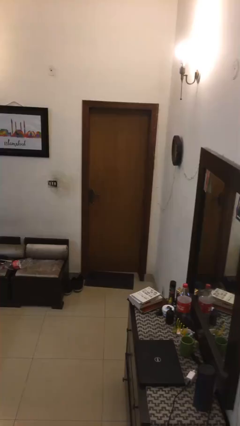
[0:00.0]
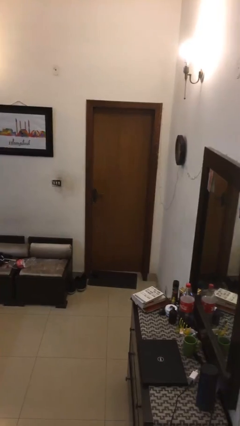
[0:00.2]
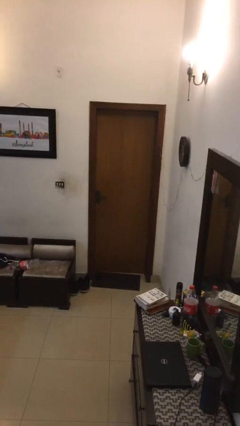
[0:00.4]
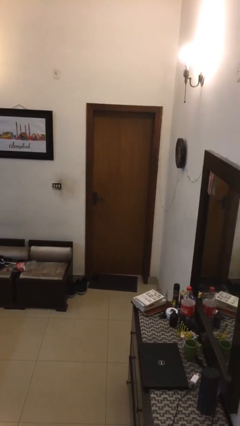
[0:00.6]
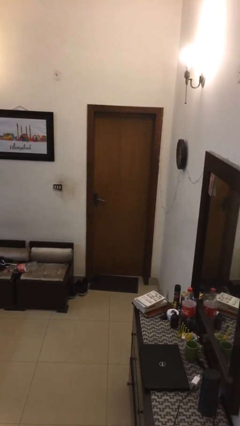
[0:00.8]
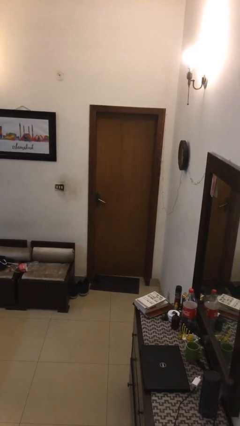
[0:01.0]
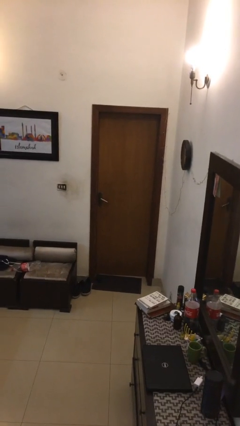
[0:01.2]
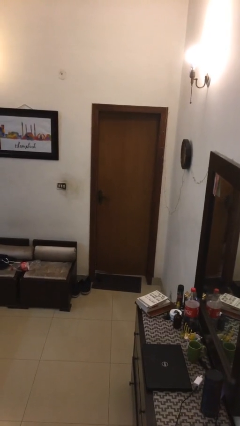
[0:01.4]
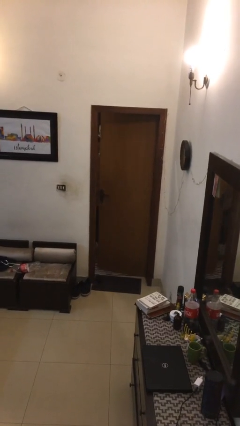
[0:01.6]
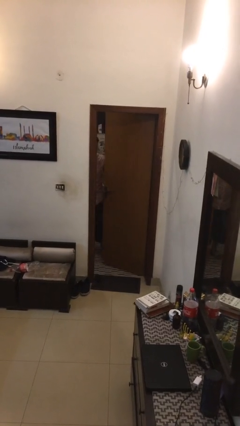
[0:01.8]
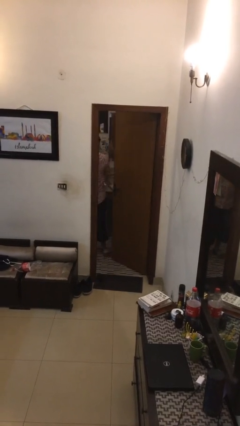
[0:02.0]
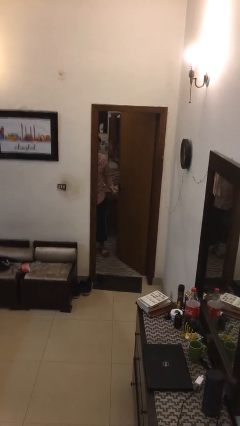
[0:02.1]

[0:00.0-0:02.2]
person opens facility door

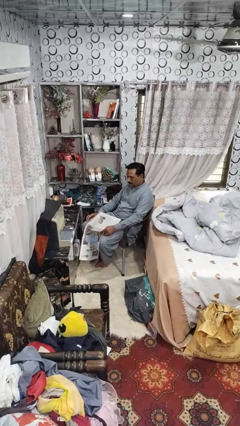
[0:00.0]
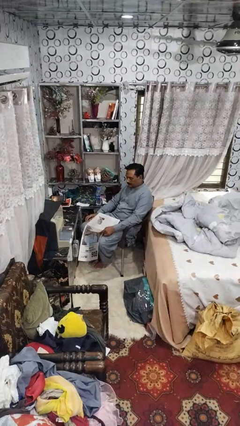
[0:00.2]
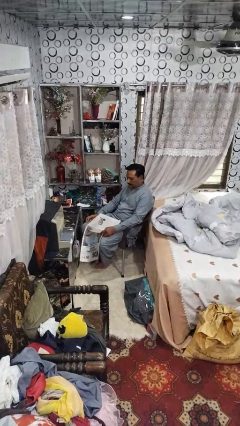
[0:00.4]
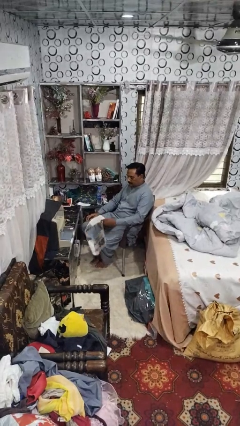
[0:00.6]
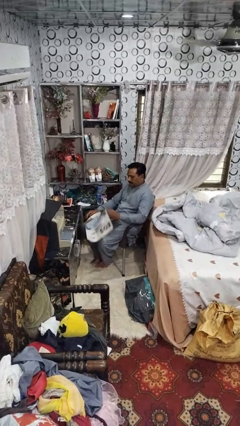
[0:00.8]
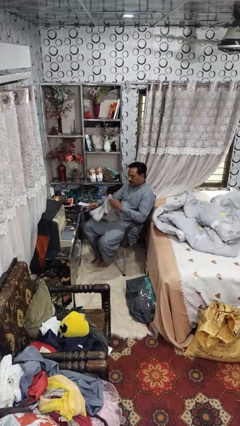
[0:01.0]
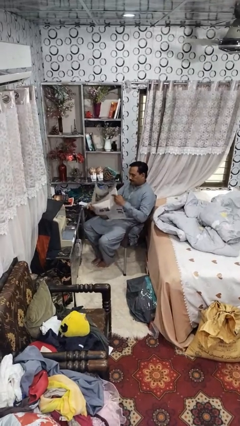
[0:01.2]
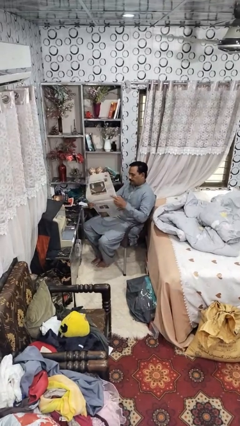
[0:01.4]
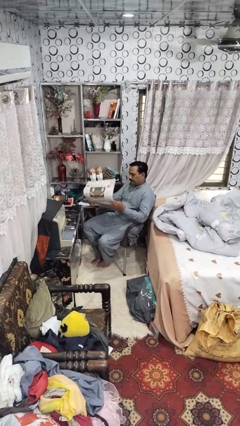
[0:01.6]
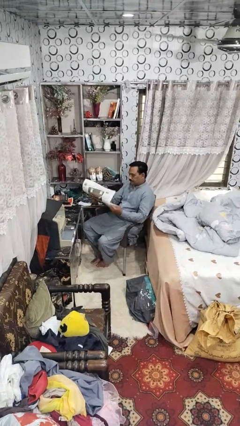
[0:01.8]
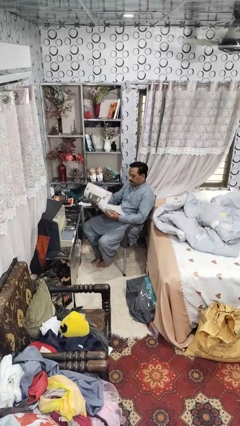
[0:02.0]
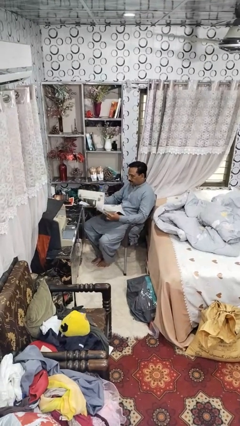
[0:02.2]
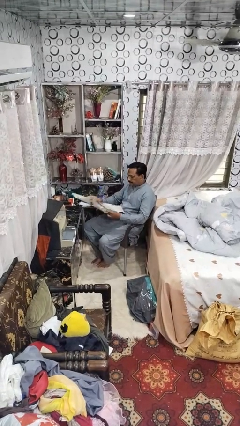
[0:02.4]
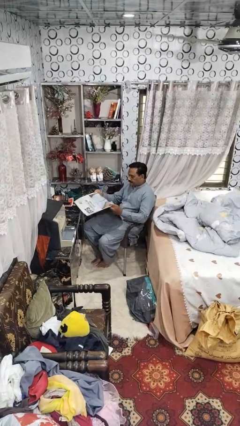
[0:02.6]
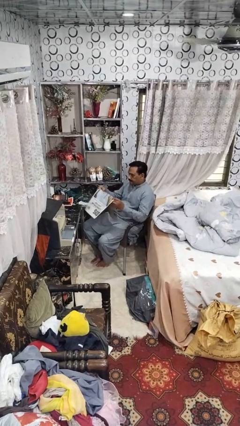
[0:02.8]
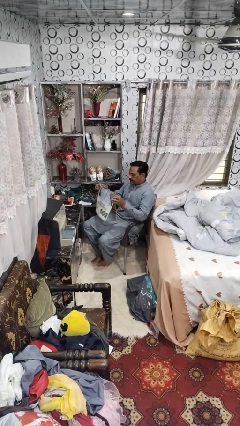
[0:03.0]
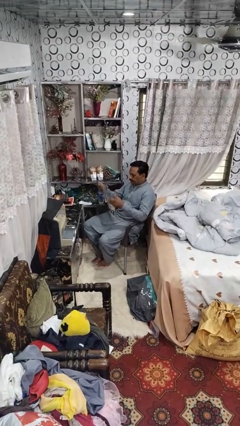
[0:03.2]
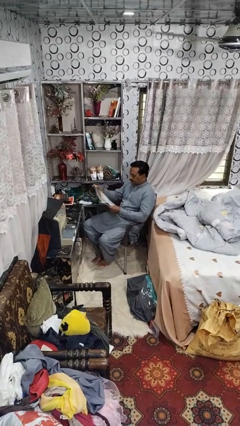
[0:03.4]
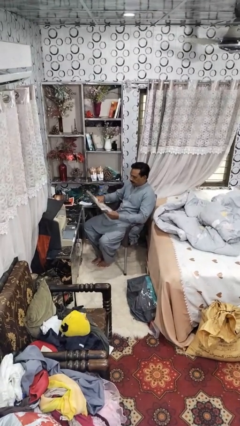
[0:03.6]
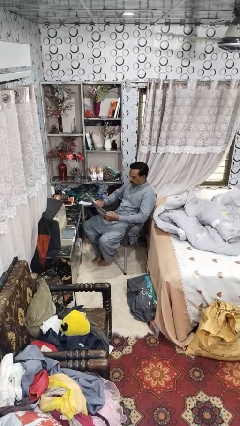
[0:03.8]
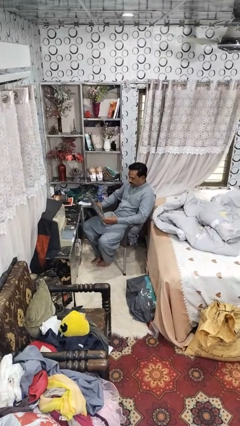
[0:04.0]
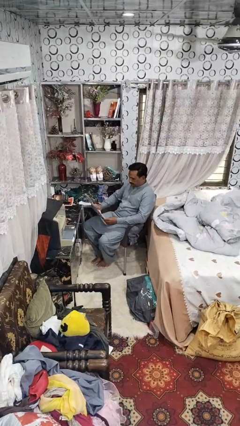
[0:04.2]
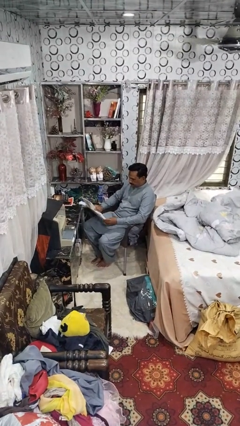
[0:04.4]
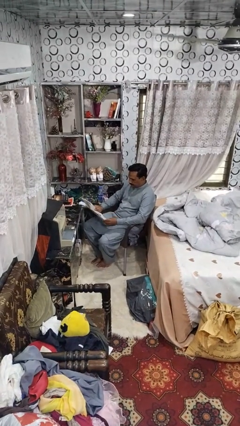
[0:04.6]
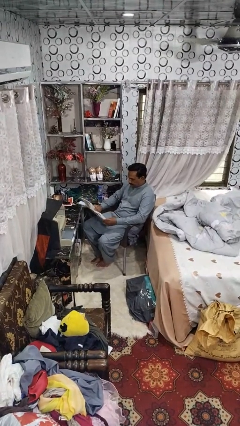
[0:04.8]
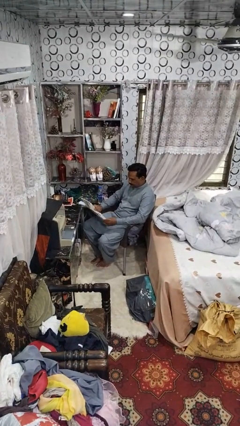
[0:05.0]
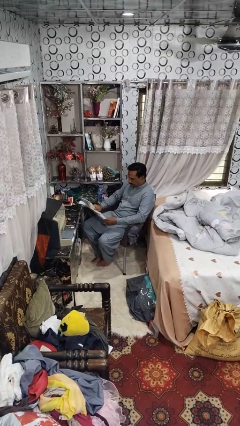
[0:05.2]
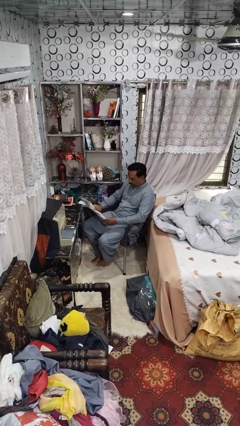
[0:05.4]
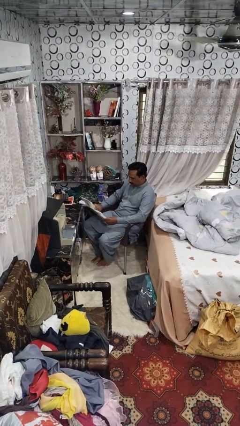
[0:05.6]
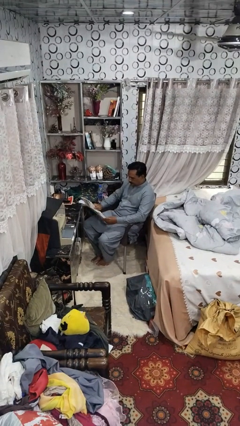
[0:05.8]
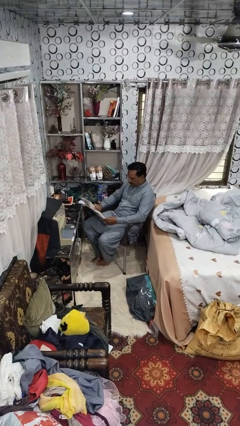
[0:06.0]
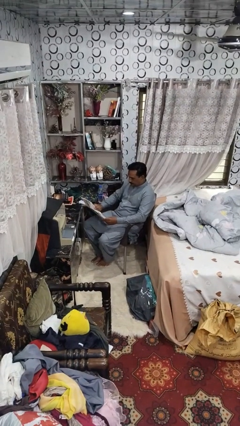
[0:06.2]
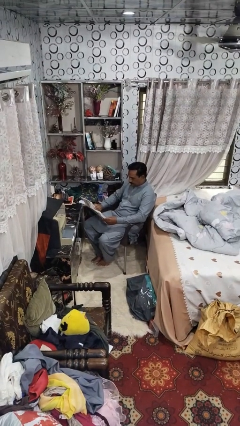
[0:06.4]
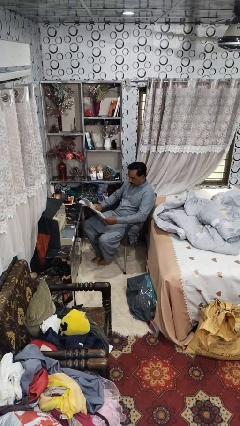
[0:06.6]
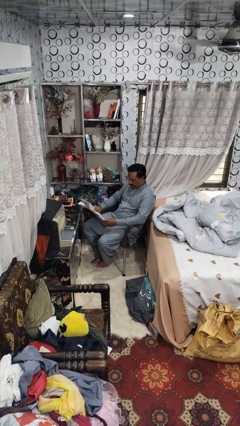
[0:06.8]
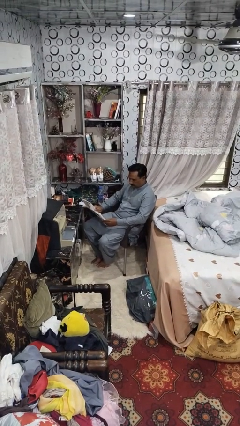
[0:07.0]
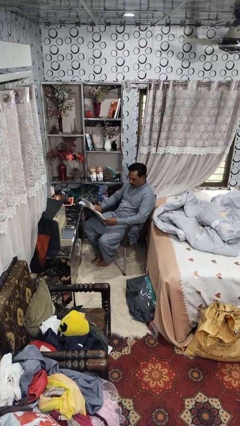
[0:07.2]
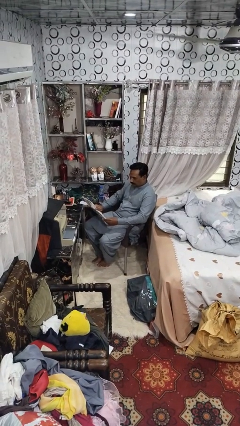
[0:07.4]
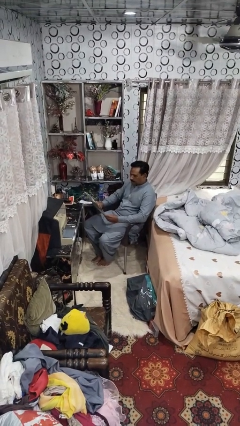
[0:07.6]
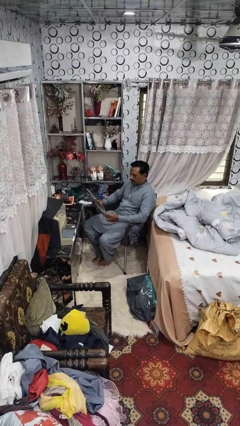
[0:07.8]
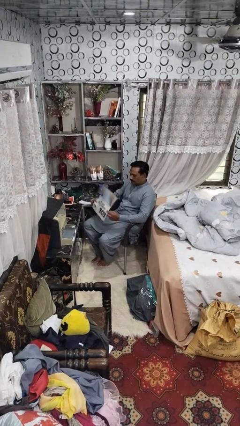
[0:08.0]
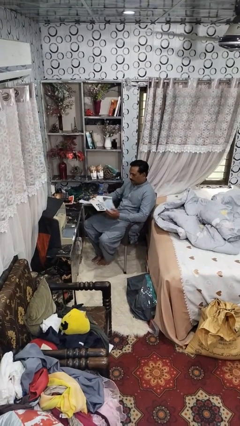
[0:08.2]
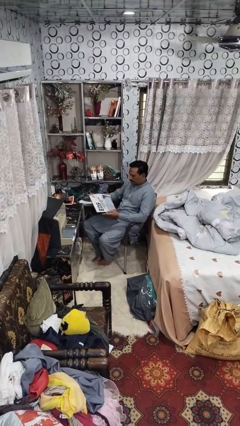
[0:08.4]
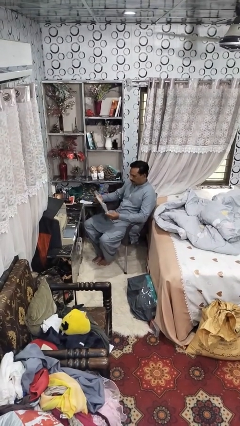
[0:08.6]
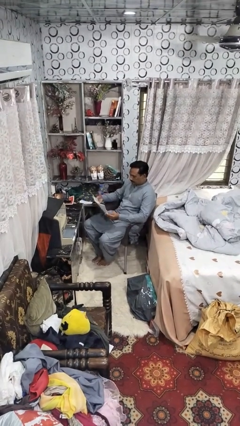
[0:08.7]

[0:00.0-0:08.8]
person reads newspaper

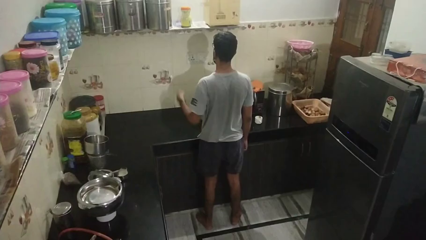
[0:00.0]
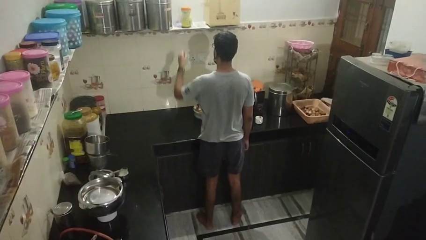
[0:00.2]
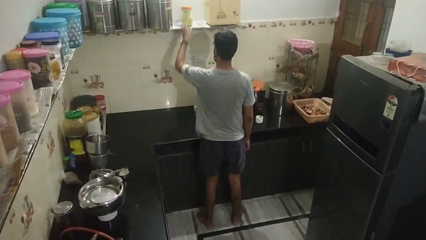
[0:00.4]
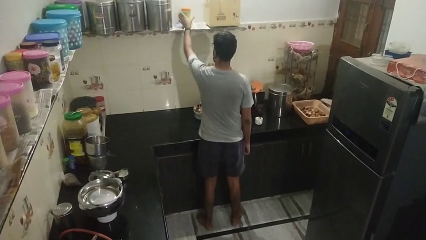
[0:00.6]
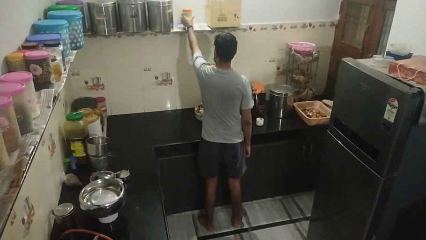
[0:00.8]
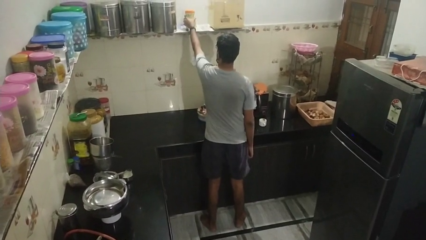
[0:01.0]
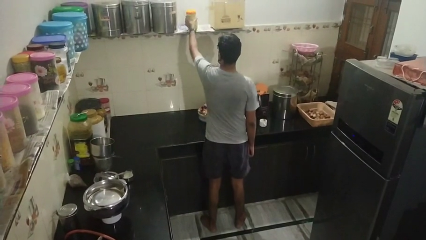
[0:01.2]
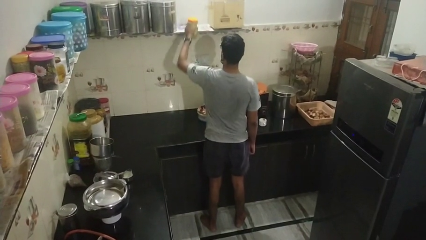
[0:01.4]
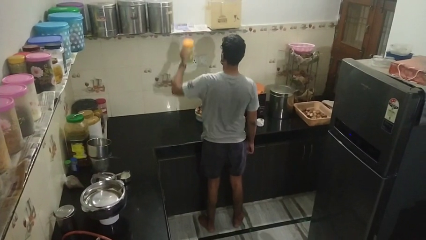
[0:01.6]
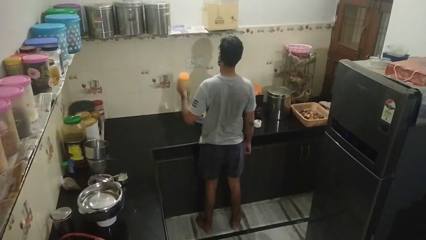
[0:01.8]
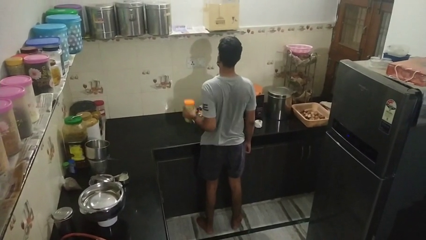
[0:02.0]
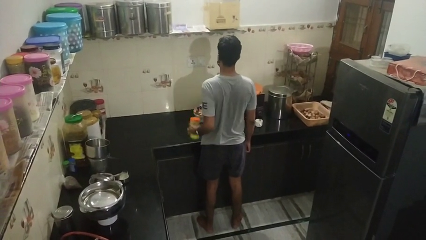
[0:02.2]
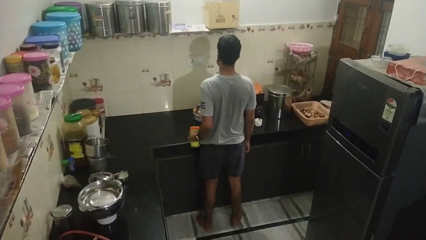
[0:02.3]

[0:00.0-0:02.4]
person picks up object from shelf

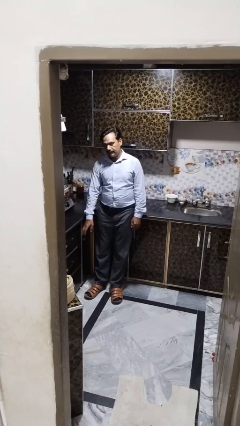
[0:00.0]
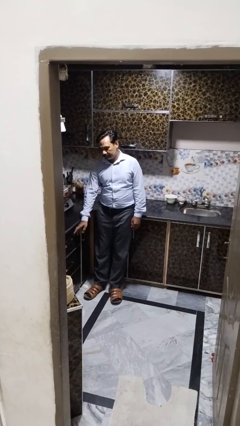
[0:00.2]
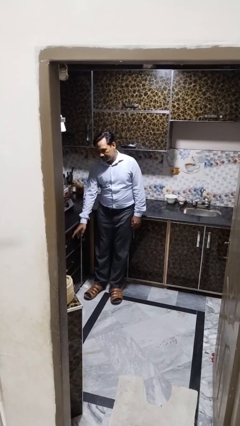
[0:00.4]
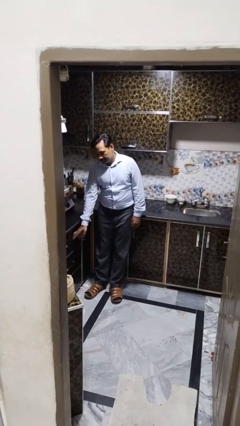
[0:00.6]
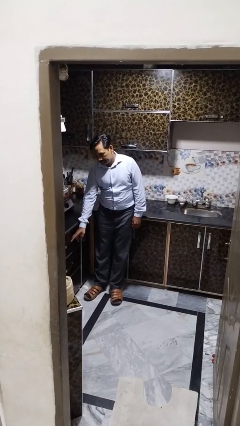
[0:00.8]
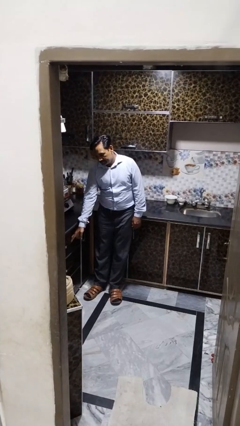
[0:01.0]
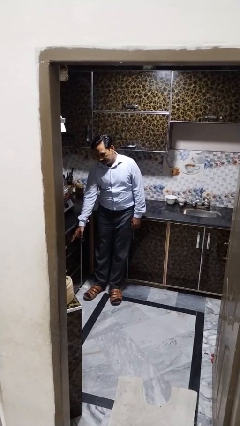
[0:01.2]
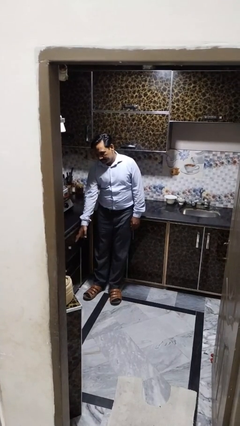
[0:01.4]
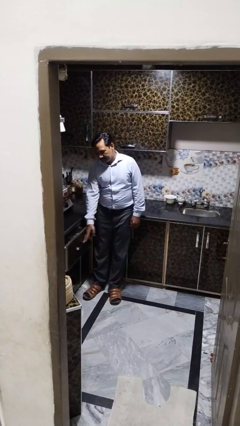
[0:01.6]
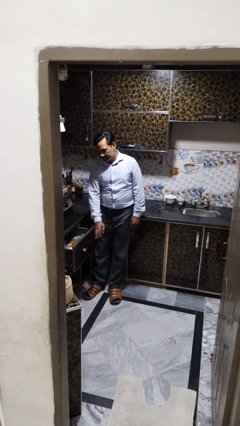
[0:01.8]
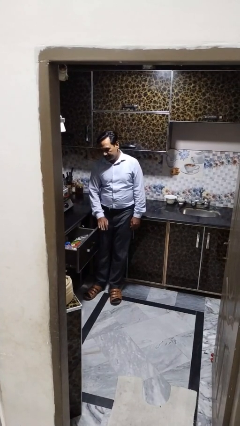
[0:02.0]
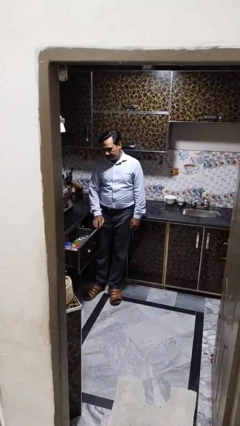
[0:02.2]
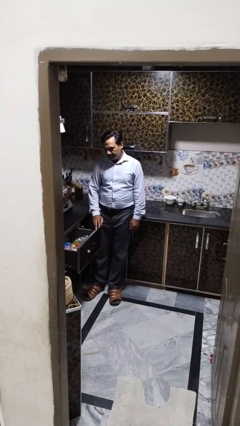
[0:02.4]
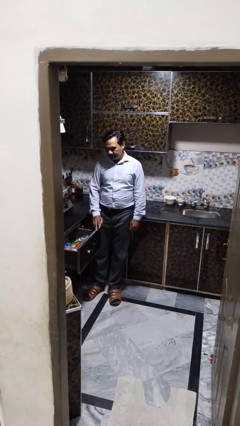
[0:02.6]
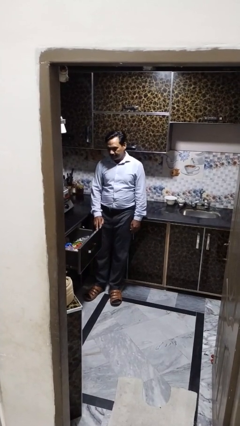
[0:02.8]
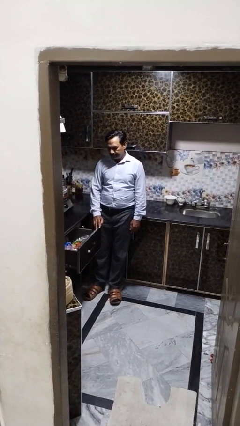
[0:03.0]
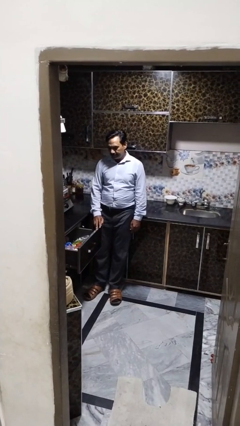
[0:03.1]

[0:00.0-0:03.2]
person opens kitchen drawer

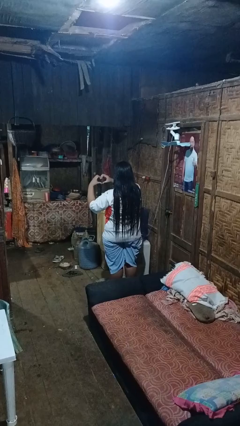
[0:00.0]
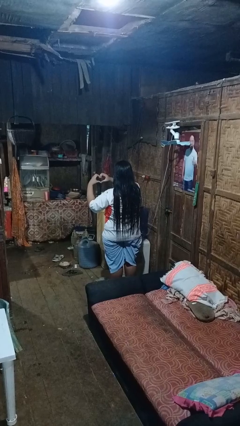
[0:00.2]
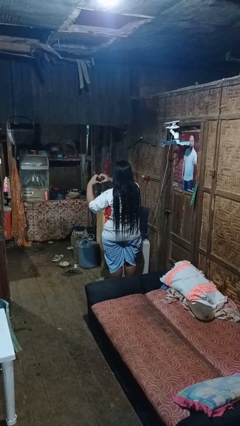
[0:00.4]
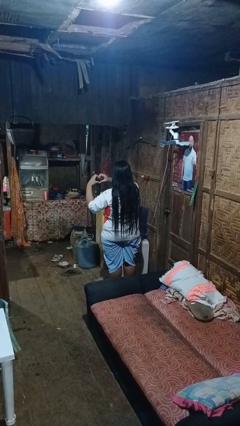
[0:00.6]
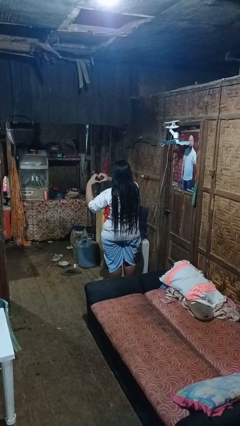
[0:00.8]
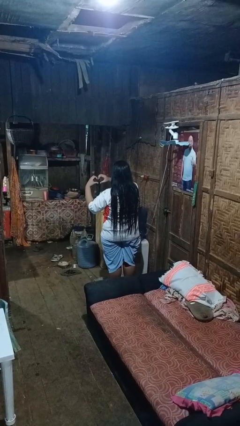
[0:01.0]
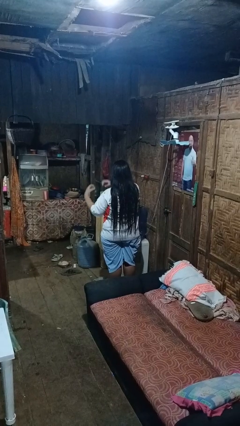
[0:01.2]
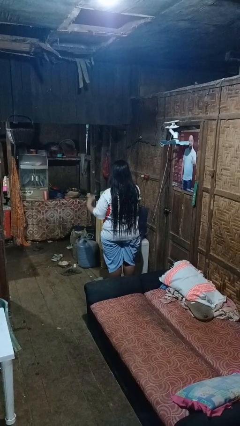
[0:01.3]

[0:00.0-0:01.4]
person gestures heart
